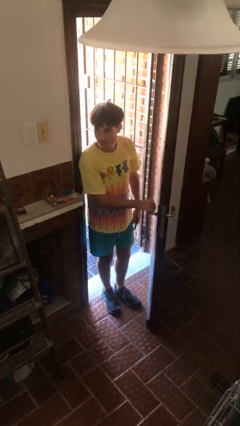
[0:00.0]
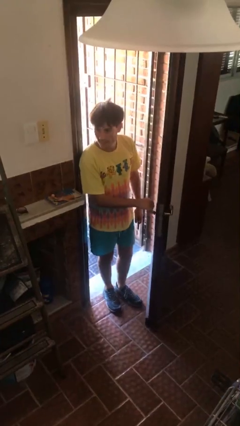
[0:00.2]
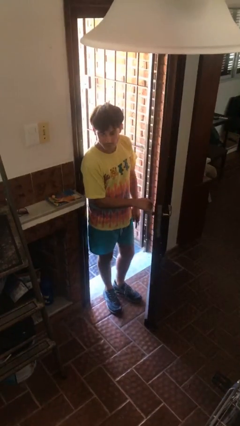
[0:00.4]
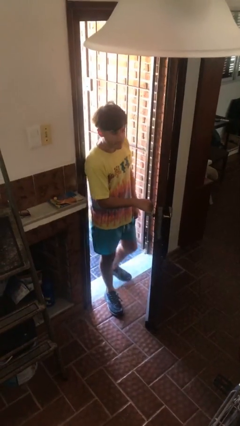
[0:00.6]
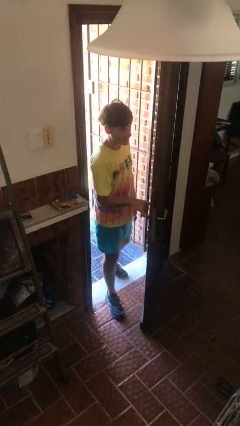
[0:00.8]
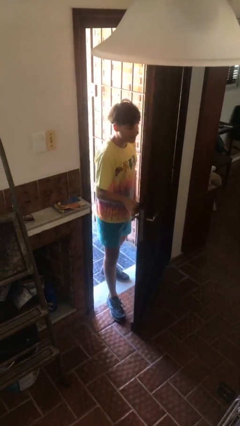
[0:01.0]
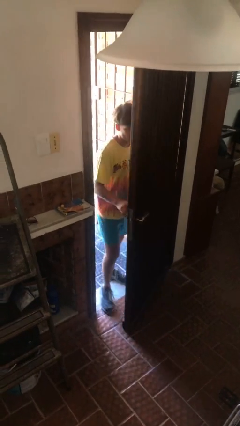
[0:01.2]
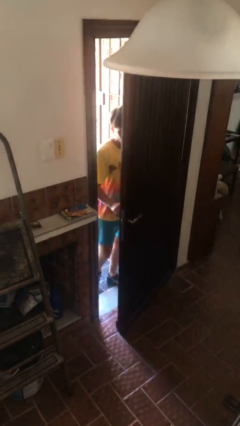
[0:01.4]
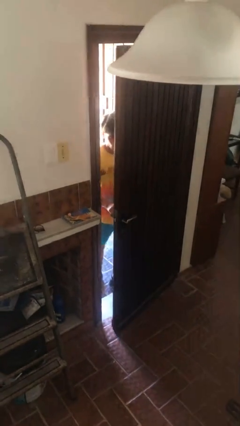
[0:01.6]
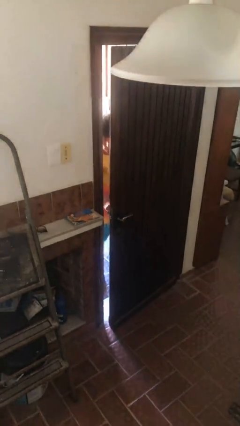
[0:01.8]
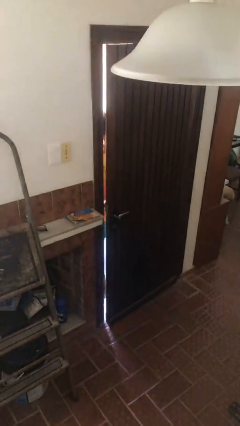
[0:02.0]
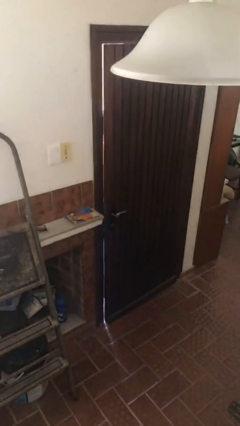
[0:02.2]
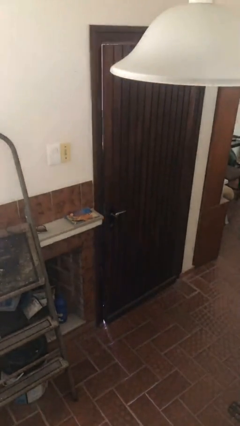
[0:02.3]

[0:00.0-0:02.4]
person closes facility door

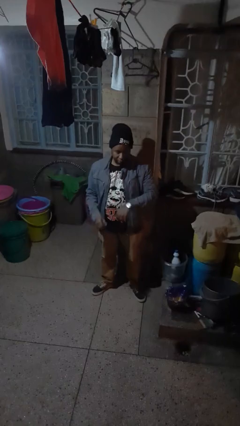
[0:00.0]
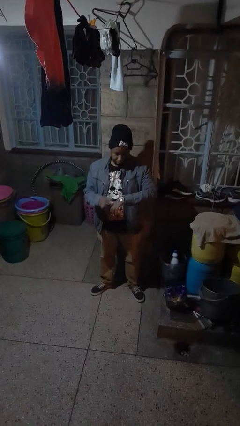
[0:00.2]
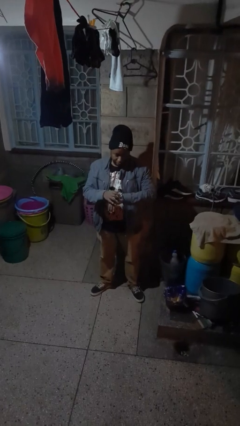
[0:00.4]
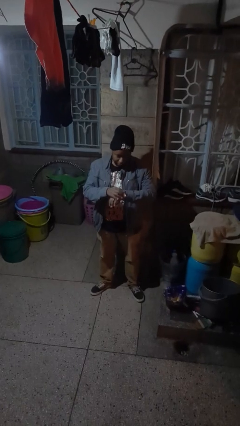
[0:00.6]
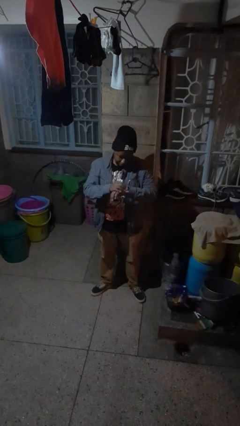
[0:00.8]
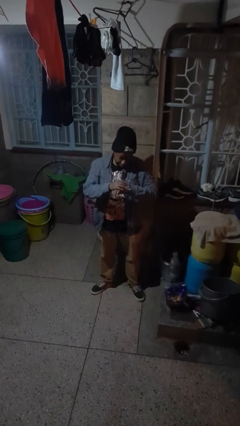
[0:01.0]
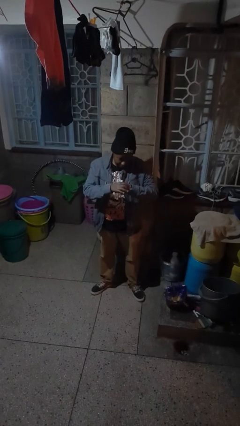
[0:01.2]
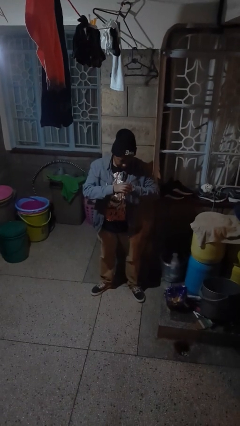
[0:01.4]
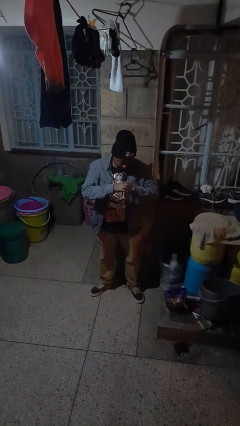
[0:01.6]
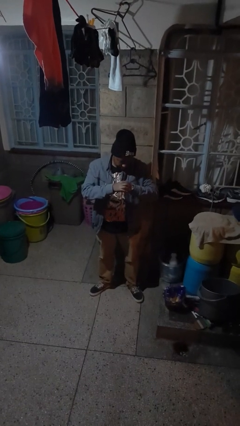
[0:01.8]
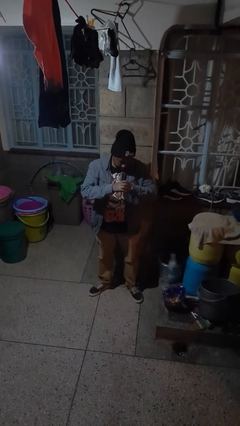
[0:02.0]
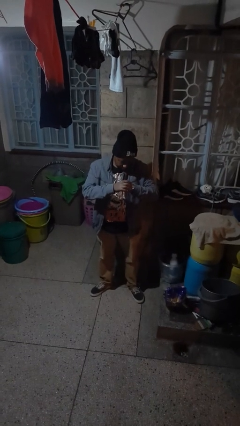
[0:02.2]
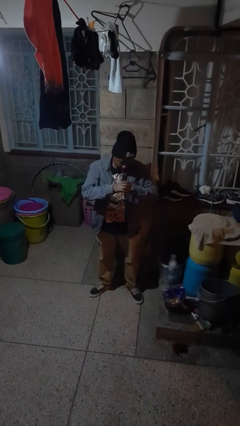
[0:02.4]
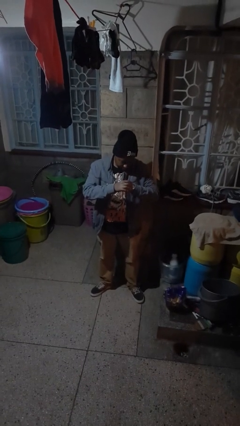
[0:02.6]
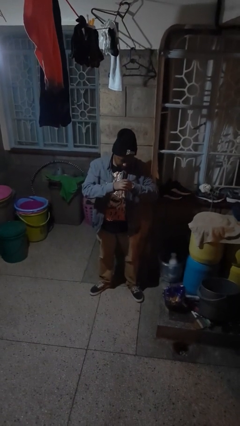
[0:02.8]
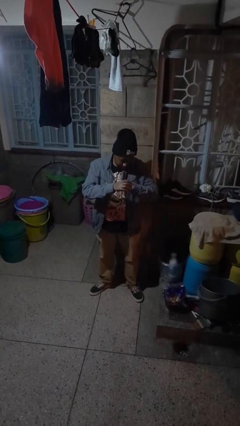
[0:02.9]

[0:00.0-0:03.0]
person looks at wristwatch

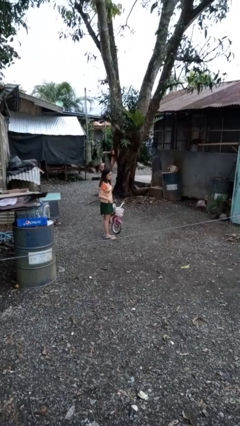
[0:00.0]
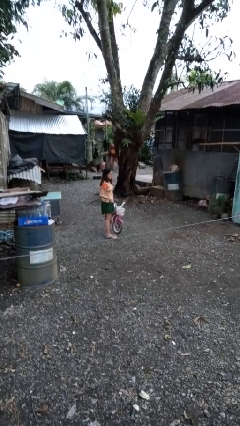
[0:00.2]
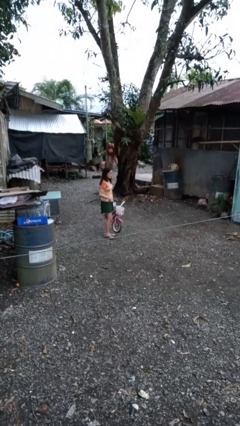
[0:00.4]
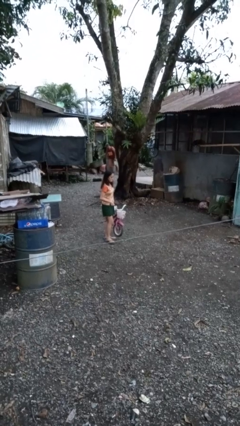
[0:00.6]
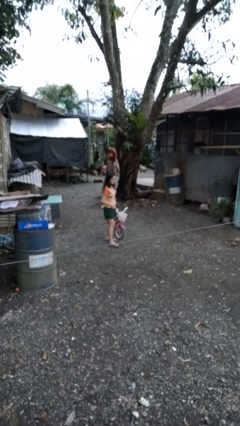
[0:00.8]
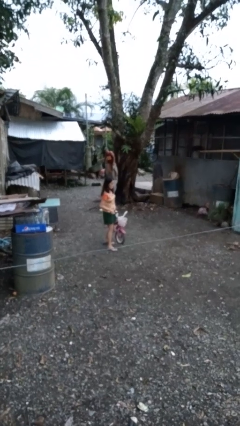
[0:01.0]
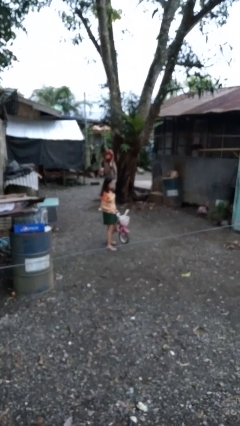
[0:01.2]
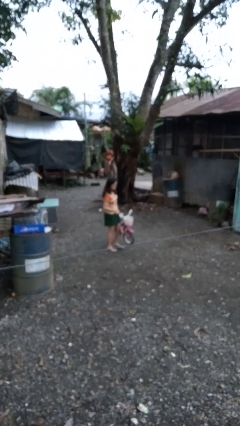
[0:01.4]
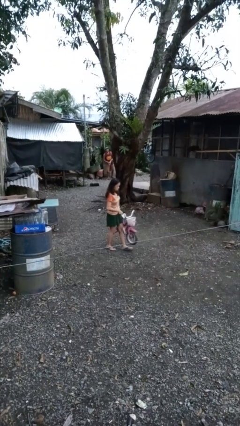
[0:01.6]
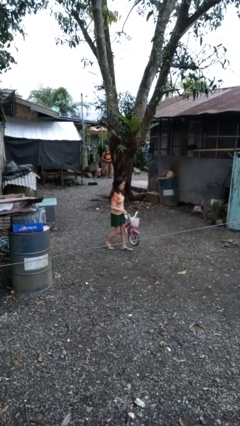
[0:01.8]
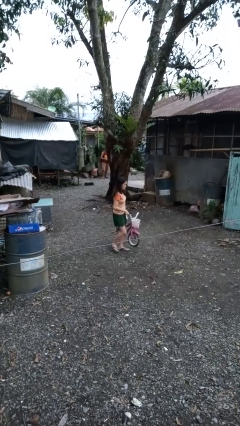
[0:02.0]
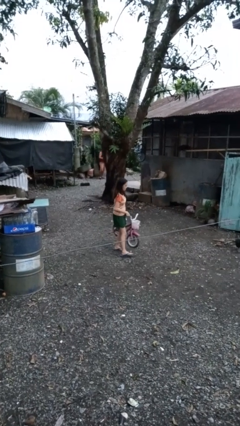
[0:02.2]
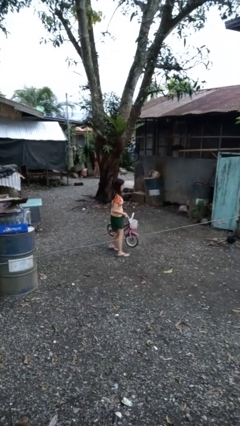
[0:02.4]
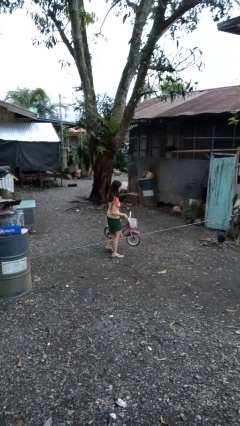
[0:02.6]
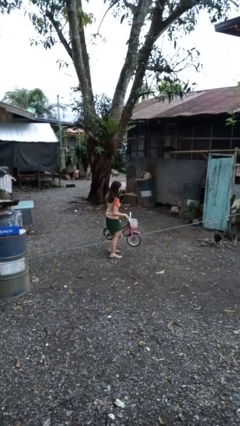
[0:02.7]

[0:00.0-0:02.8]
person carries bicycle

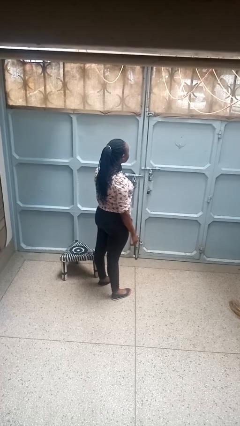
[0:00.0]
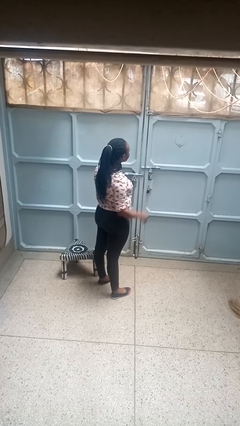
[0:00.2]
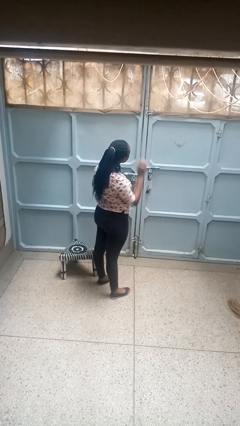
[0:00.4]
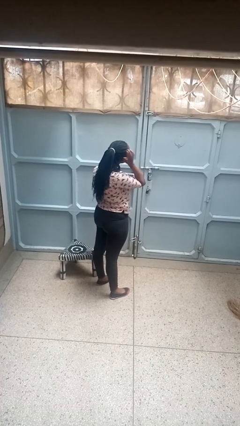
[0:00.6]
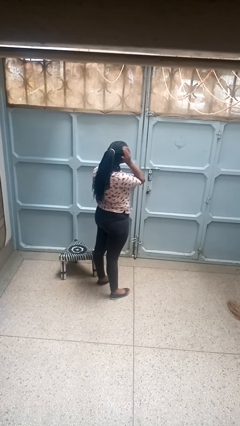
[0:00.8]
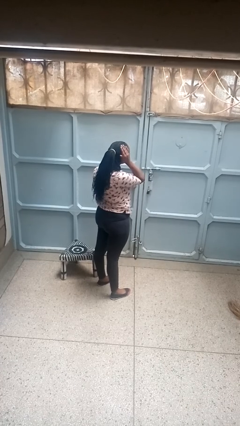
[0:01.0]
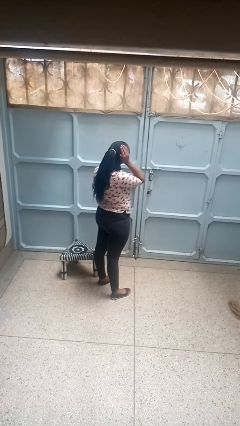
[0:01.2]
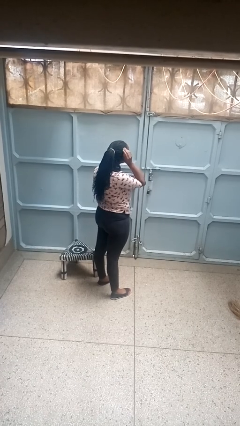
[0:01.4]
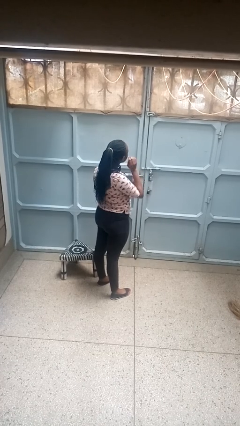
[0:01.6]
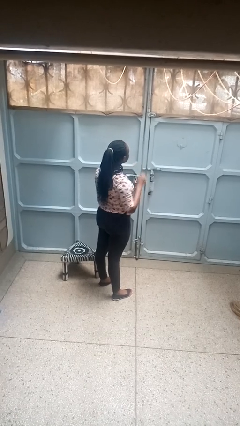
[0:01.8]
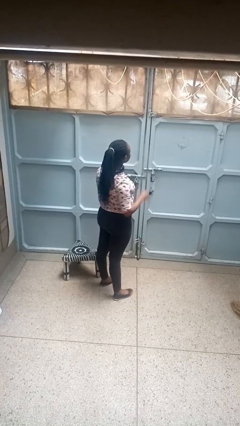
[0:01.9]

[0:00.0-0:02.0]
person pats head

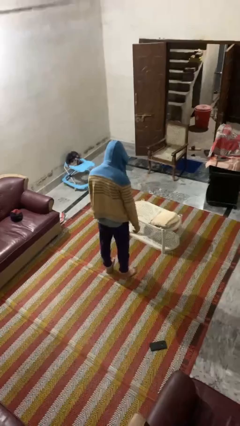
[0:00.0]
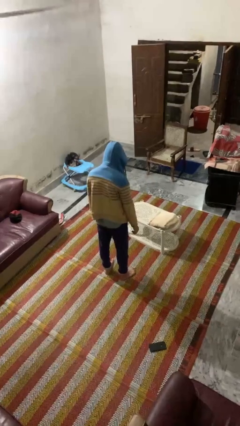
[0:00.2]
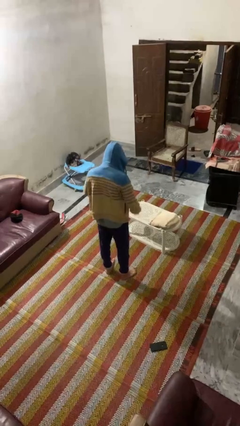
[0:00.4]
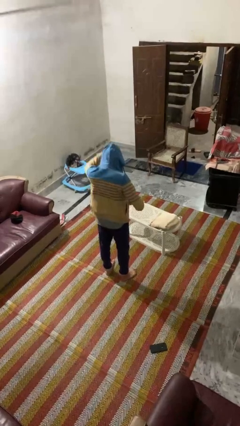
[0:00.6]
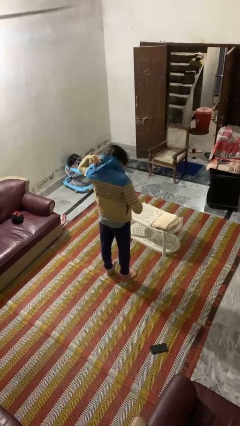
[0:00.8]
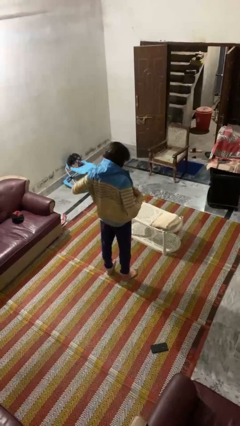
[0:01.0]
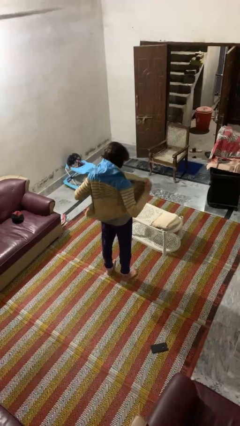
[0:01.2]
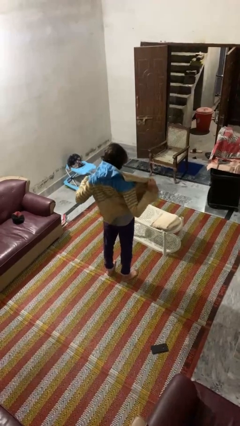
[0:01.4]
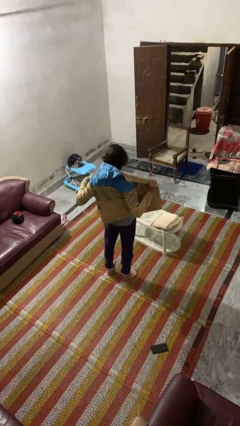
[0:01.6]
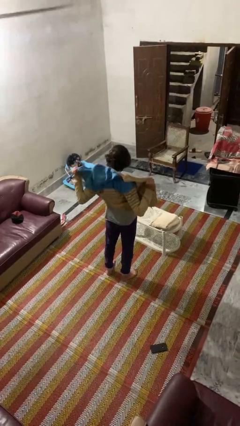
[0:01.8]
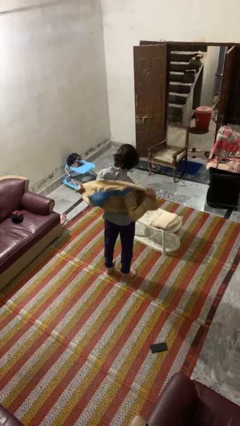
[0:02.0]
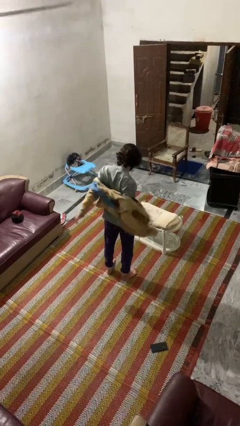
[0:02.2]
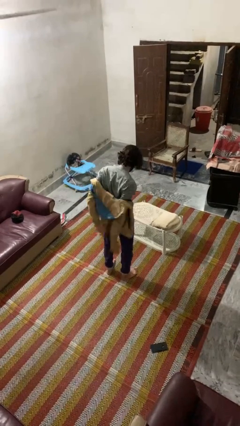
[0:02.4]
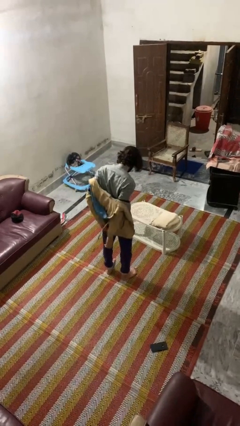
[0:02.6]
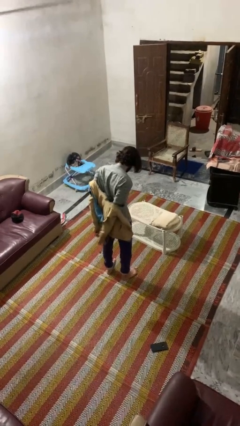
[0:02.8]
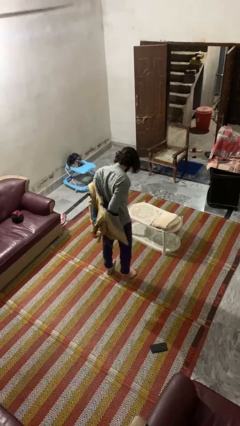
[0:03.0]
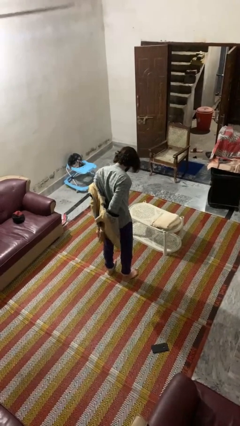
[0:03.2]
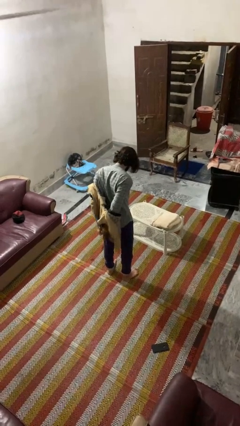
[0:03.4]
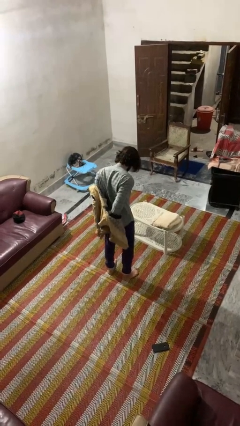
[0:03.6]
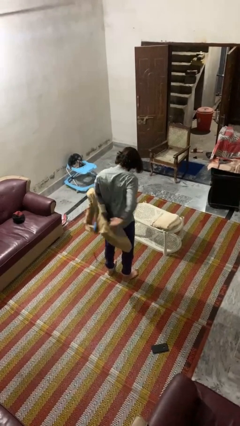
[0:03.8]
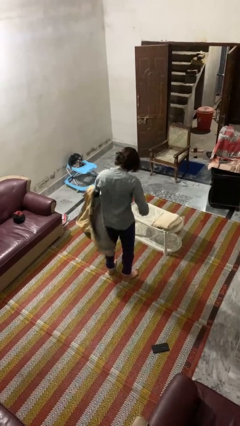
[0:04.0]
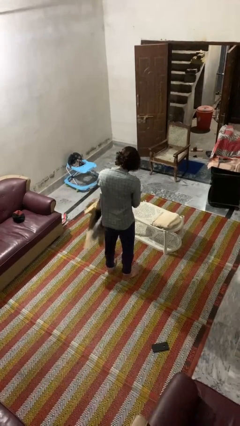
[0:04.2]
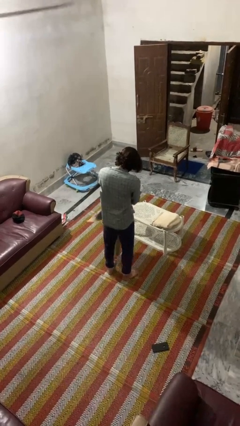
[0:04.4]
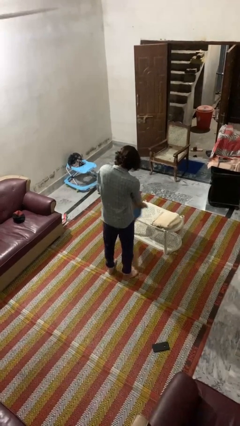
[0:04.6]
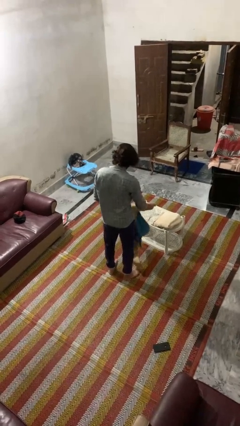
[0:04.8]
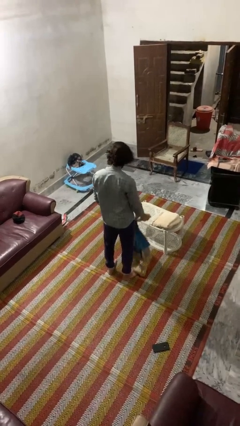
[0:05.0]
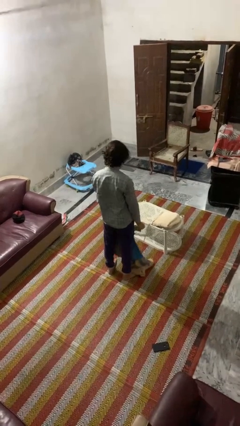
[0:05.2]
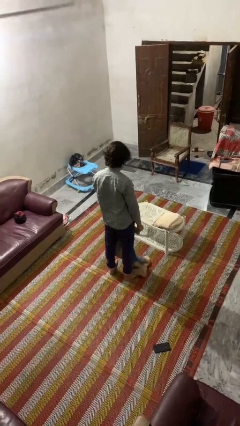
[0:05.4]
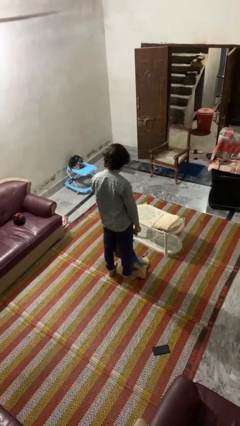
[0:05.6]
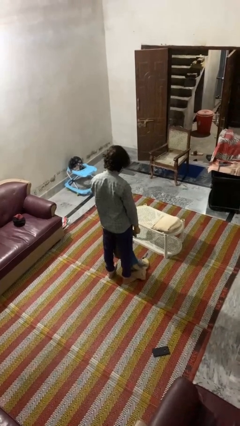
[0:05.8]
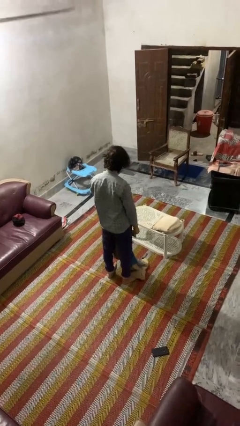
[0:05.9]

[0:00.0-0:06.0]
person takes off hoodie

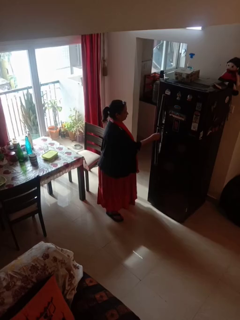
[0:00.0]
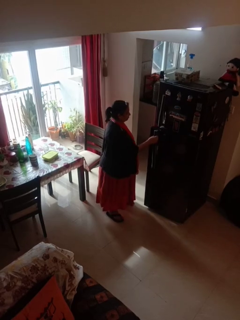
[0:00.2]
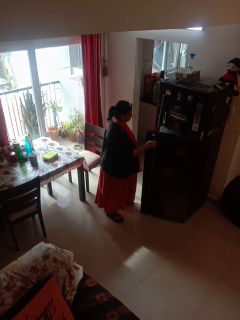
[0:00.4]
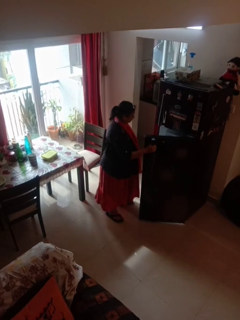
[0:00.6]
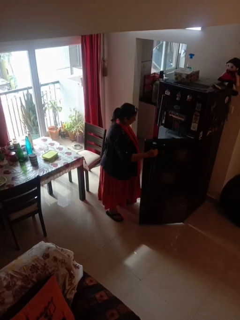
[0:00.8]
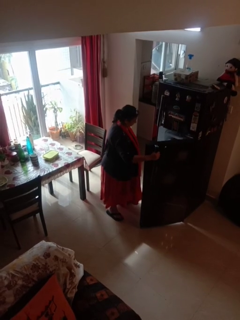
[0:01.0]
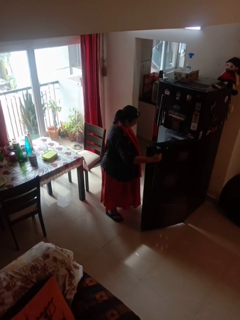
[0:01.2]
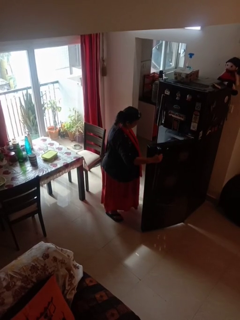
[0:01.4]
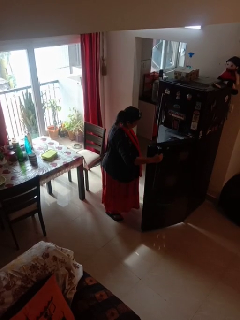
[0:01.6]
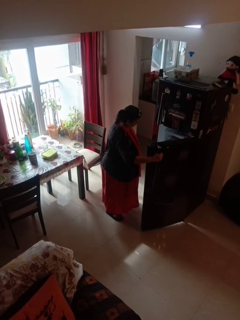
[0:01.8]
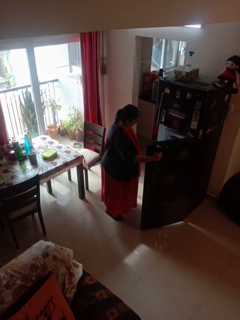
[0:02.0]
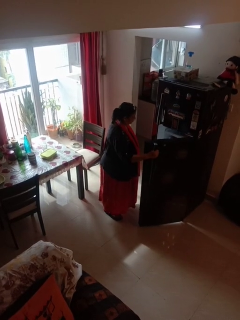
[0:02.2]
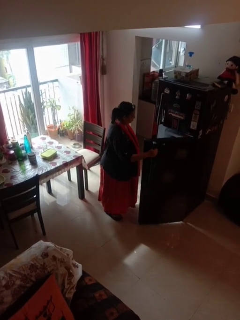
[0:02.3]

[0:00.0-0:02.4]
person opens refrigerator
